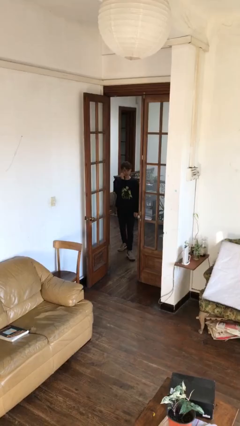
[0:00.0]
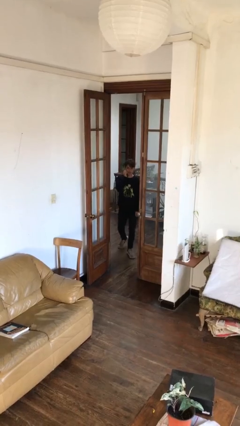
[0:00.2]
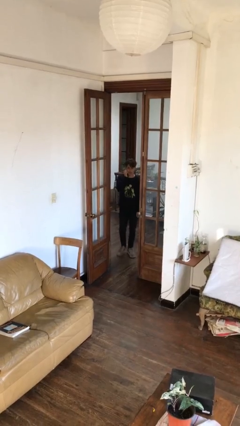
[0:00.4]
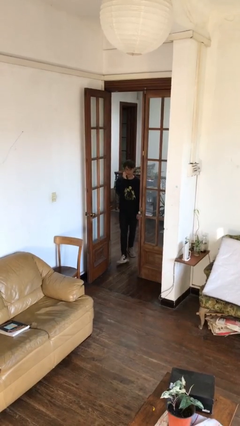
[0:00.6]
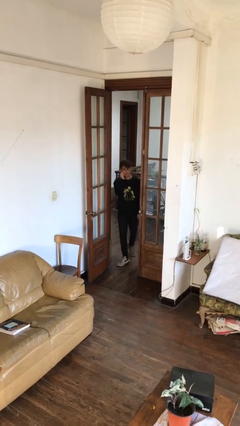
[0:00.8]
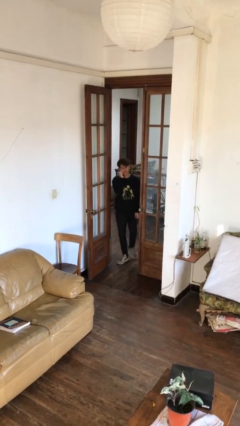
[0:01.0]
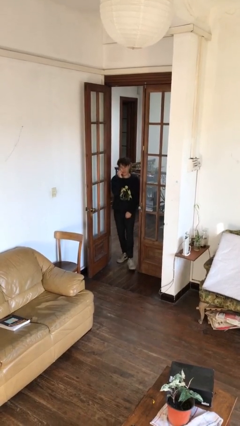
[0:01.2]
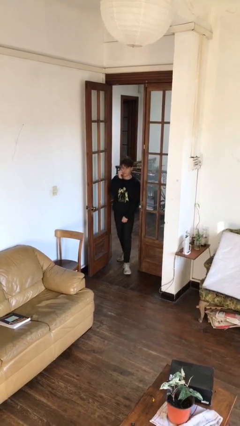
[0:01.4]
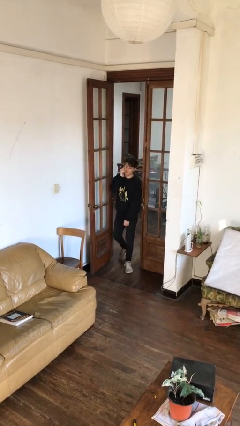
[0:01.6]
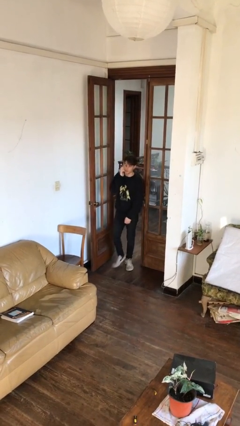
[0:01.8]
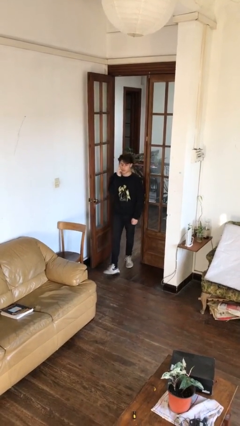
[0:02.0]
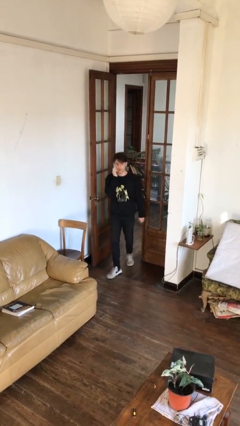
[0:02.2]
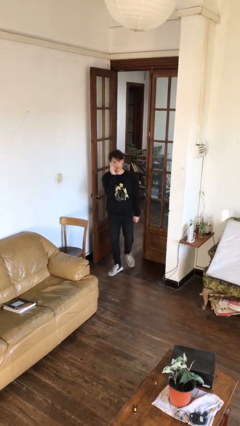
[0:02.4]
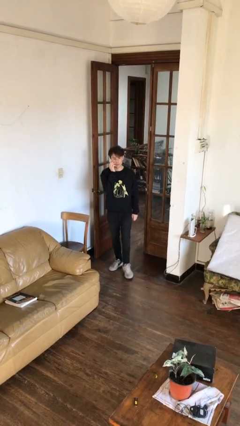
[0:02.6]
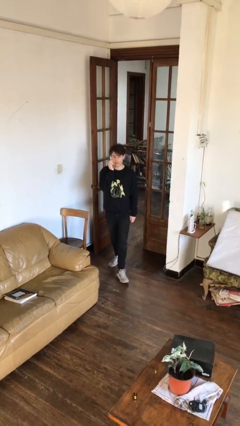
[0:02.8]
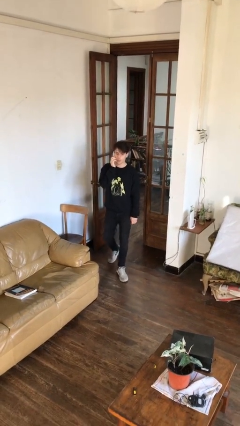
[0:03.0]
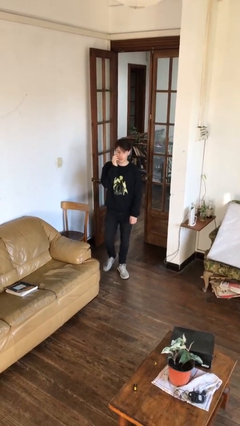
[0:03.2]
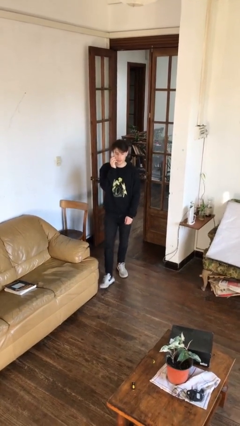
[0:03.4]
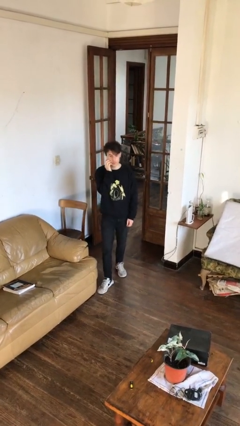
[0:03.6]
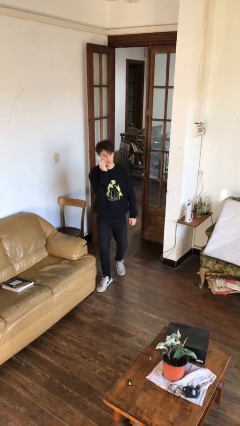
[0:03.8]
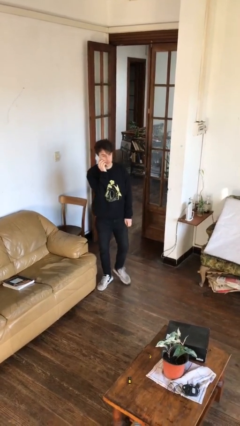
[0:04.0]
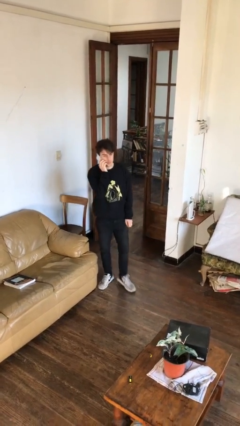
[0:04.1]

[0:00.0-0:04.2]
person enters scene through structure

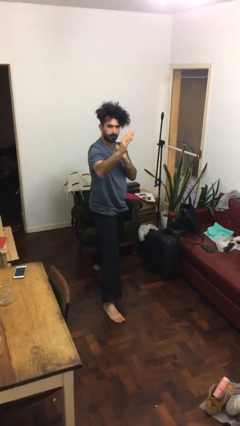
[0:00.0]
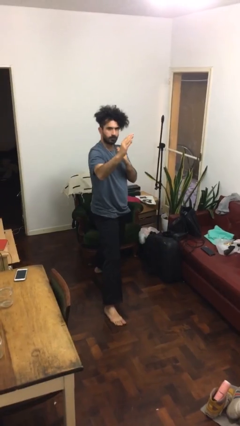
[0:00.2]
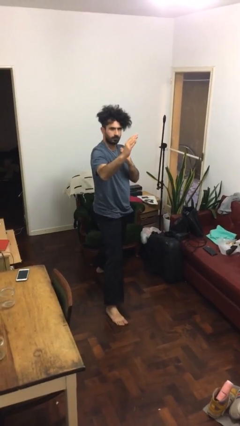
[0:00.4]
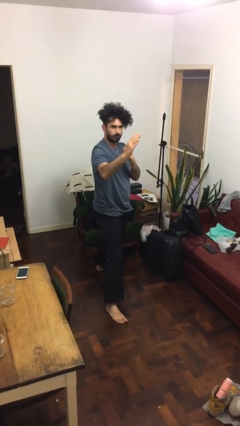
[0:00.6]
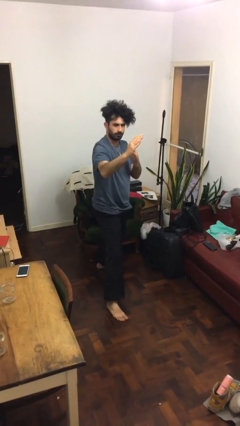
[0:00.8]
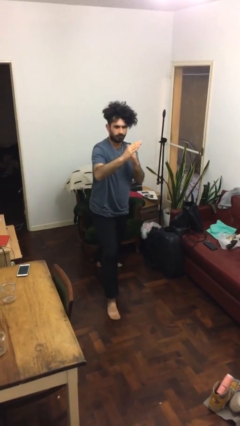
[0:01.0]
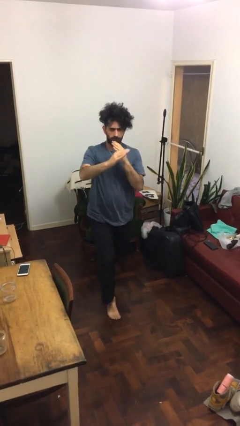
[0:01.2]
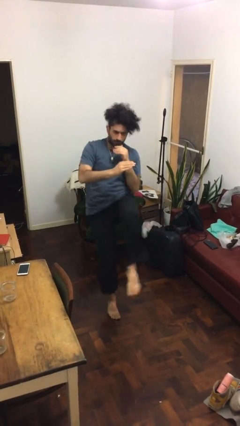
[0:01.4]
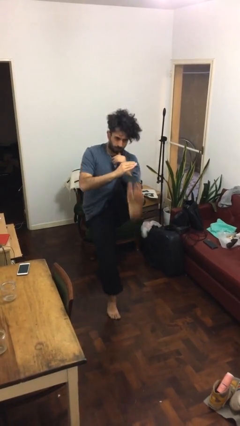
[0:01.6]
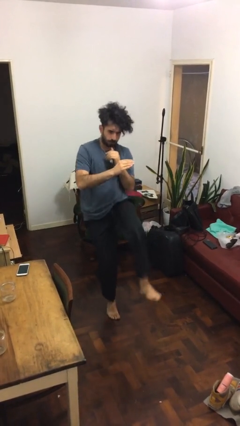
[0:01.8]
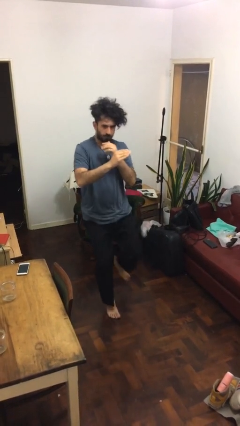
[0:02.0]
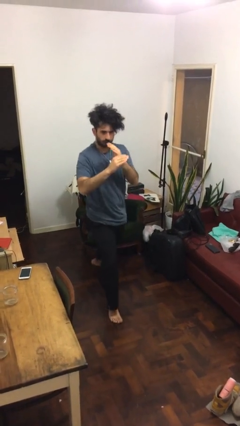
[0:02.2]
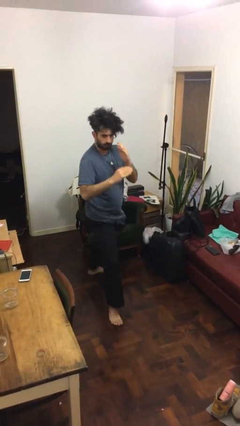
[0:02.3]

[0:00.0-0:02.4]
person karate kicks

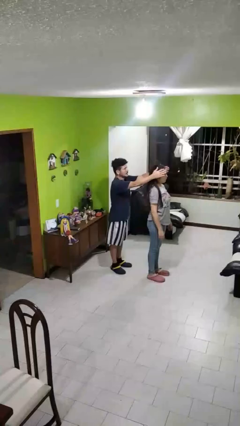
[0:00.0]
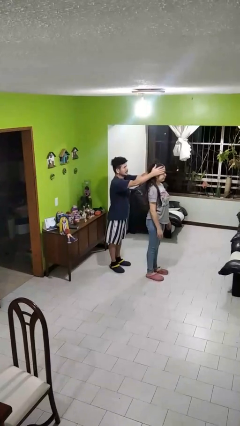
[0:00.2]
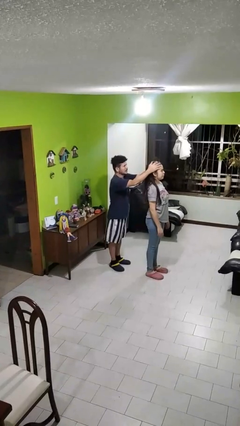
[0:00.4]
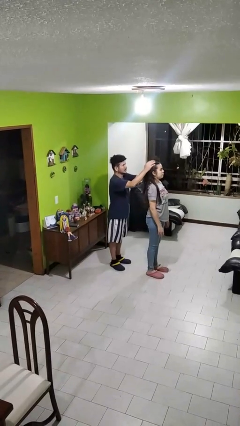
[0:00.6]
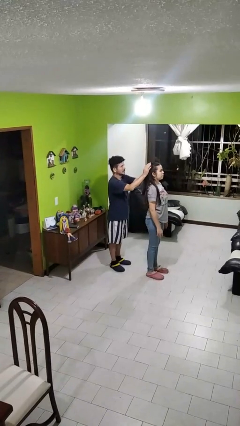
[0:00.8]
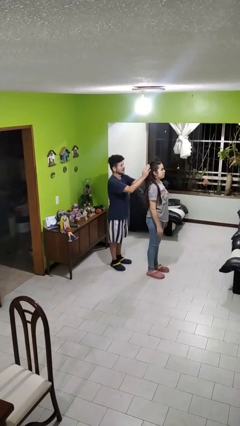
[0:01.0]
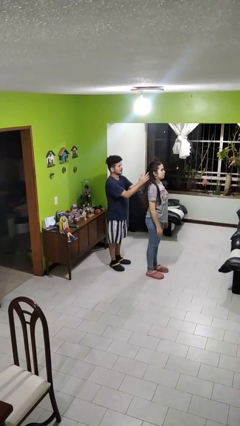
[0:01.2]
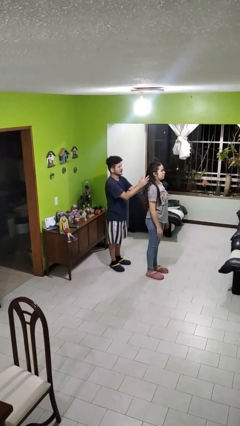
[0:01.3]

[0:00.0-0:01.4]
person grabs person by hair

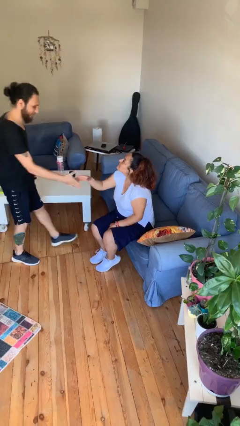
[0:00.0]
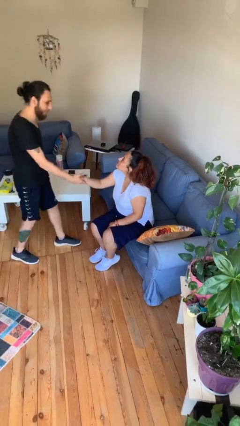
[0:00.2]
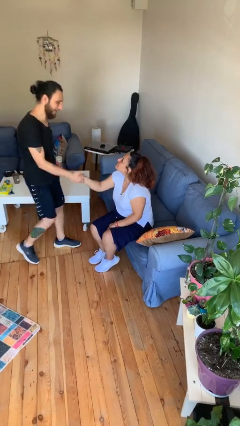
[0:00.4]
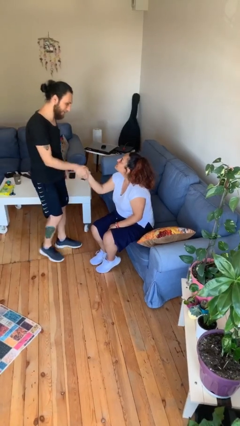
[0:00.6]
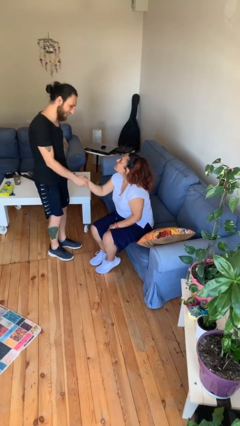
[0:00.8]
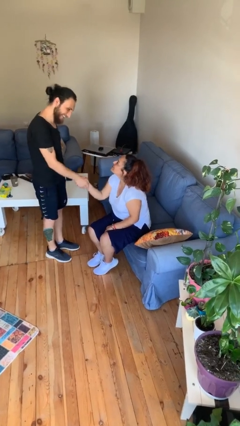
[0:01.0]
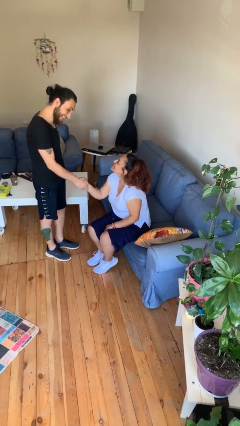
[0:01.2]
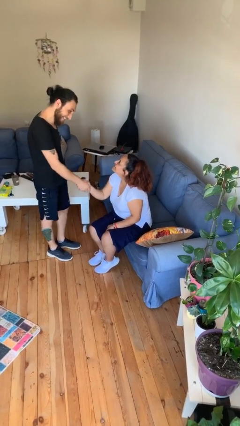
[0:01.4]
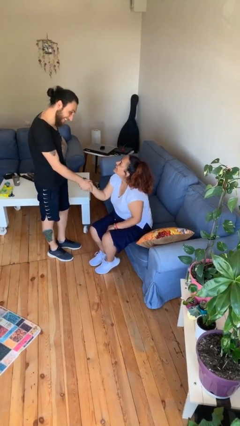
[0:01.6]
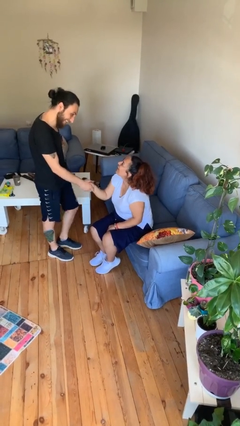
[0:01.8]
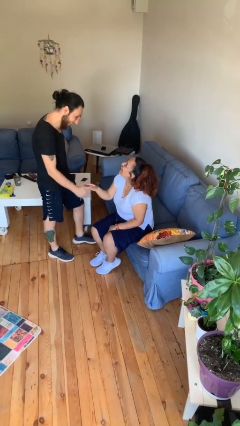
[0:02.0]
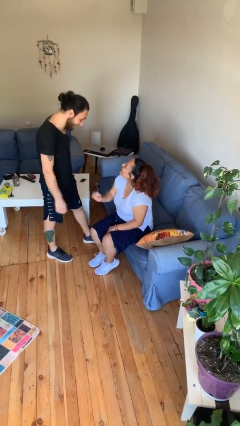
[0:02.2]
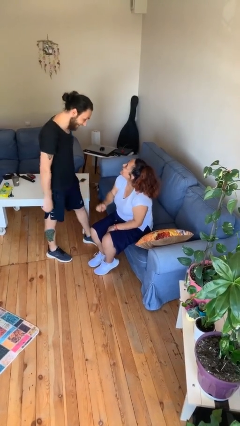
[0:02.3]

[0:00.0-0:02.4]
person shakes hand

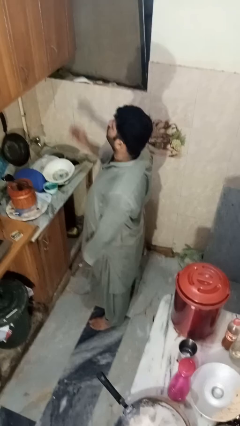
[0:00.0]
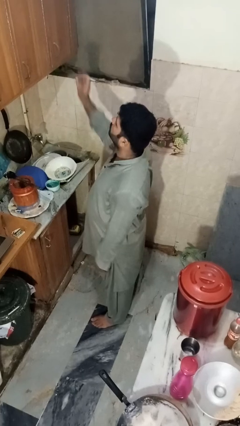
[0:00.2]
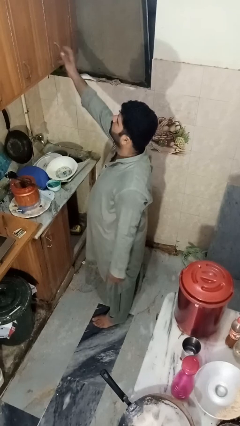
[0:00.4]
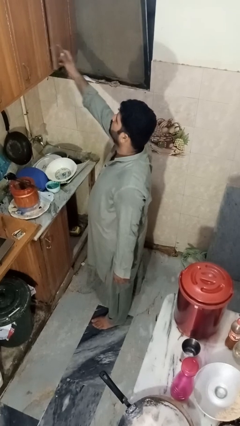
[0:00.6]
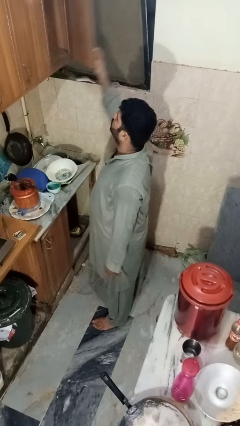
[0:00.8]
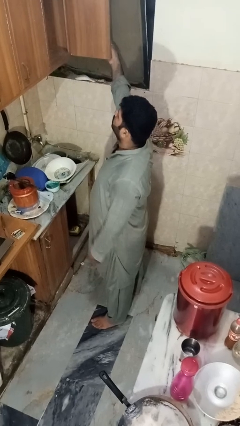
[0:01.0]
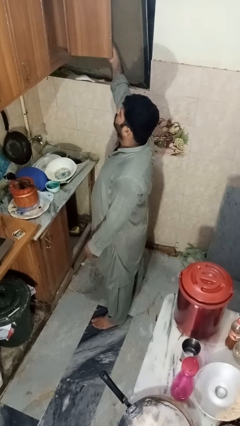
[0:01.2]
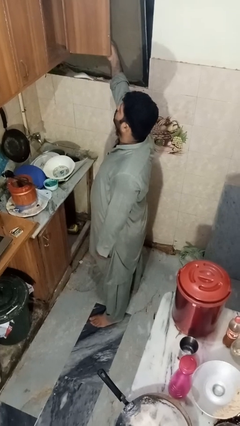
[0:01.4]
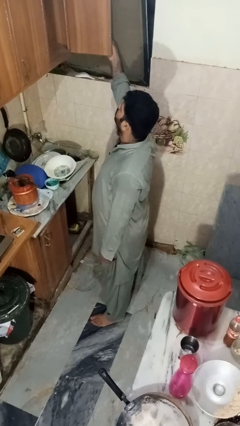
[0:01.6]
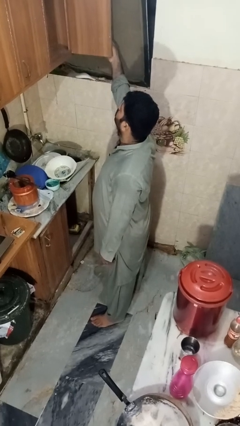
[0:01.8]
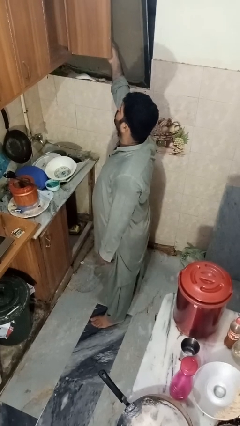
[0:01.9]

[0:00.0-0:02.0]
person opens cabinet

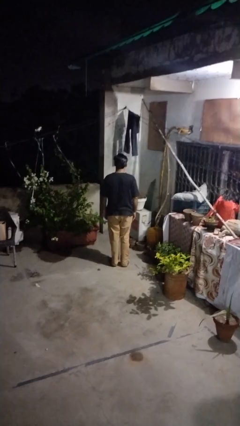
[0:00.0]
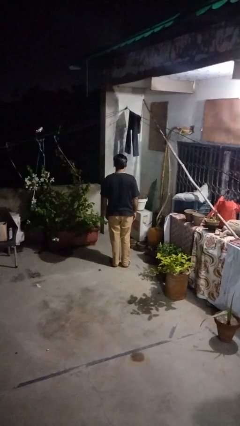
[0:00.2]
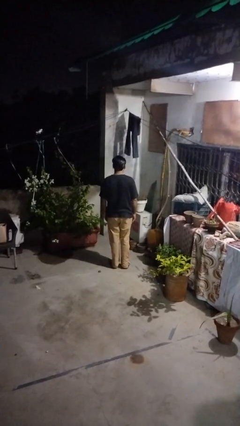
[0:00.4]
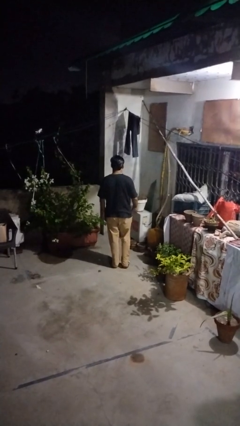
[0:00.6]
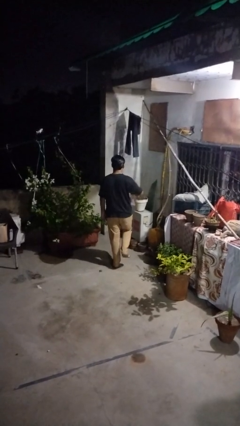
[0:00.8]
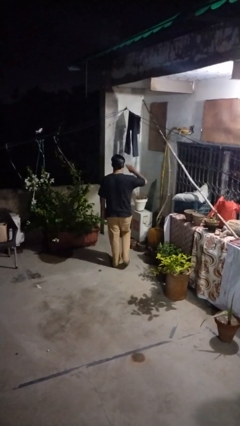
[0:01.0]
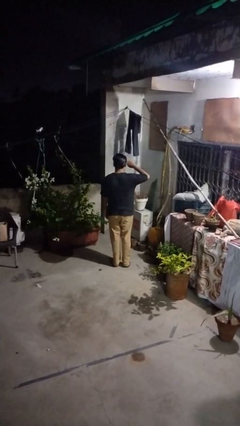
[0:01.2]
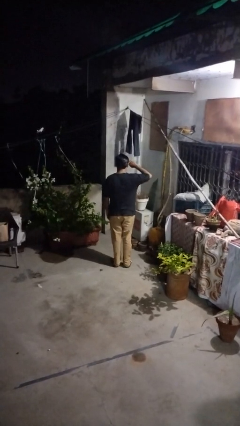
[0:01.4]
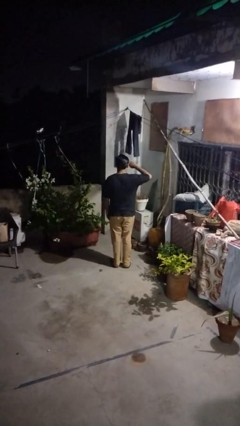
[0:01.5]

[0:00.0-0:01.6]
person salutes

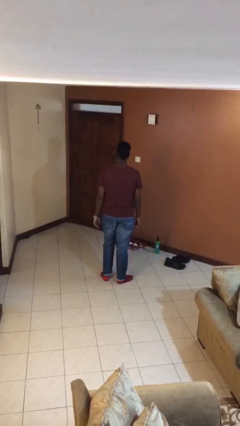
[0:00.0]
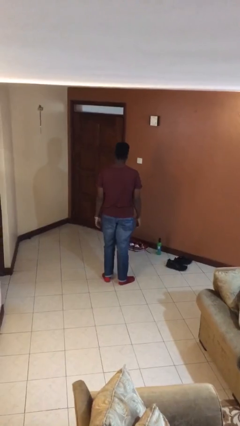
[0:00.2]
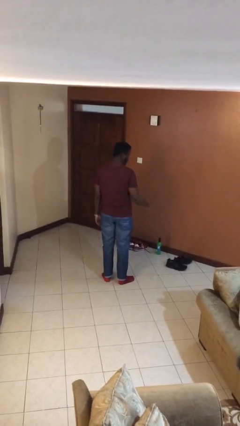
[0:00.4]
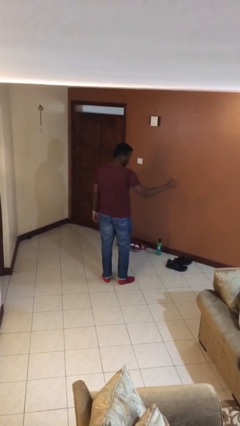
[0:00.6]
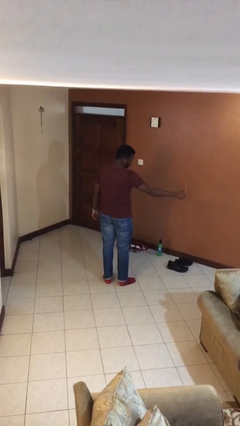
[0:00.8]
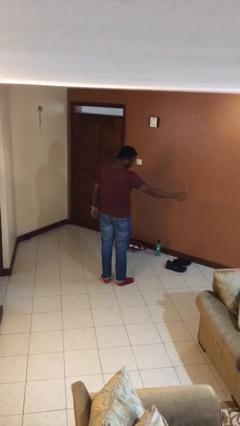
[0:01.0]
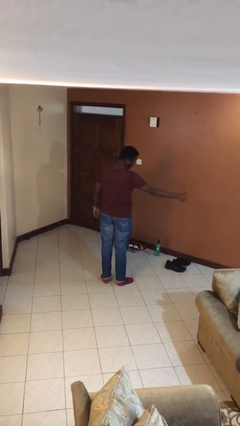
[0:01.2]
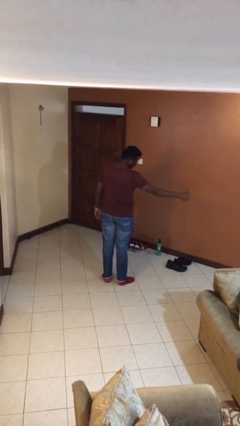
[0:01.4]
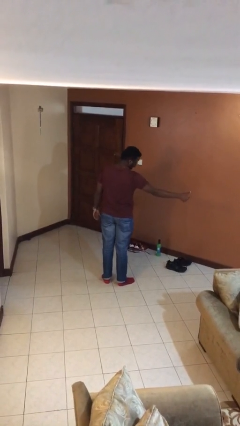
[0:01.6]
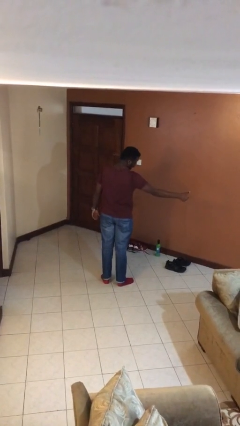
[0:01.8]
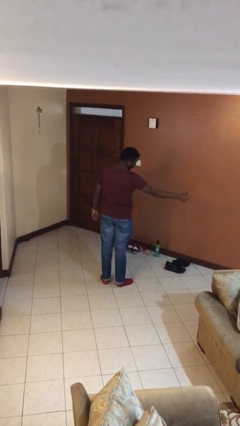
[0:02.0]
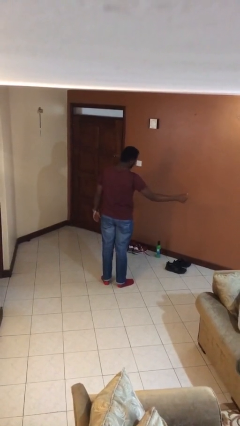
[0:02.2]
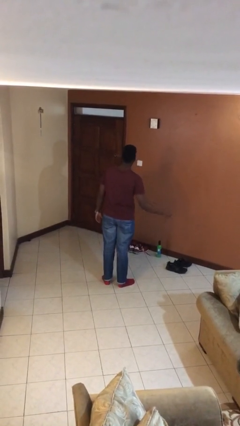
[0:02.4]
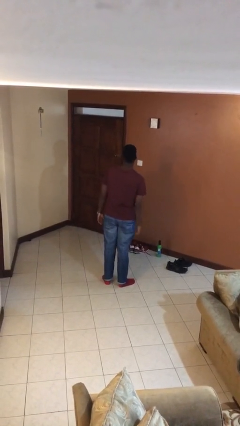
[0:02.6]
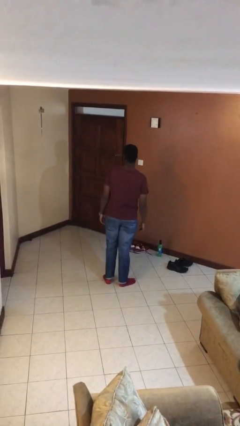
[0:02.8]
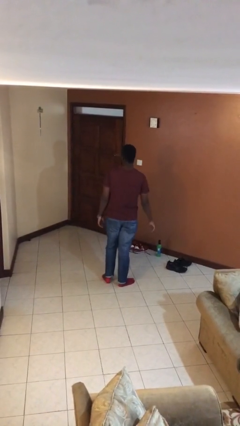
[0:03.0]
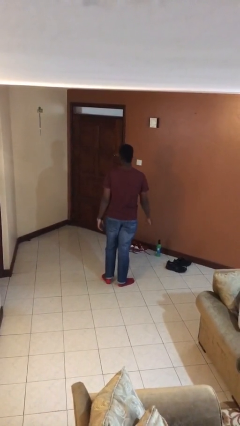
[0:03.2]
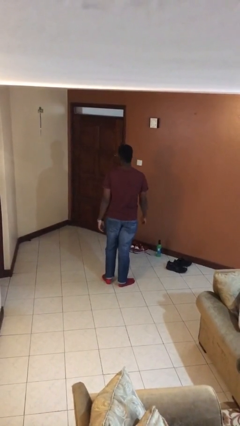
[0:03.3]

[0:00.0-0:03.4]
person gestures thumbs up
